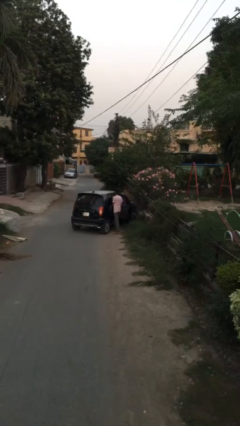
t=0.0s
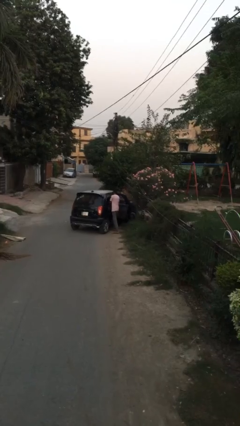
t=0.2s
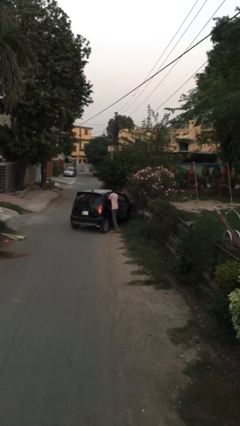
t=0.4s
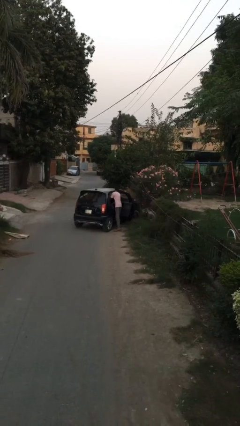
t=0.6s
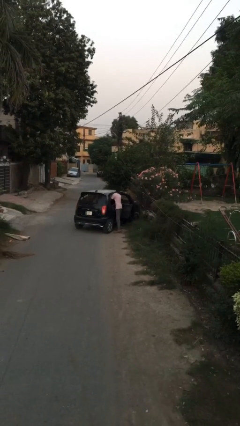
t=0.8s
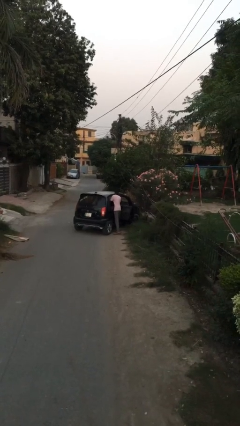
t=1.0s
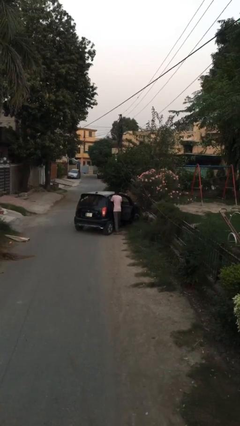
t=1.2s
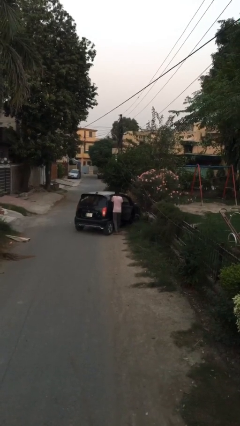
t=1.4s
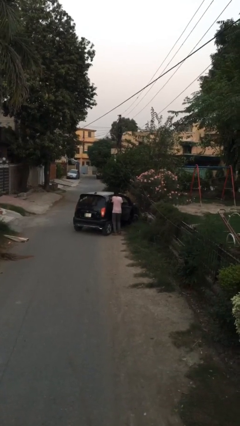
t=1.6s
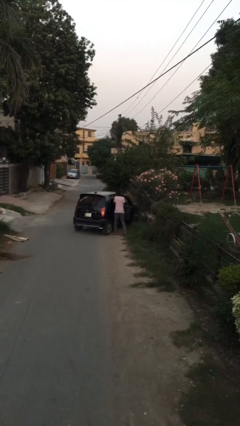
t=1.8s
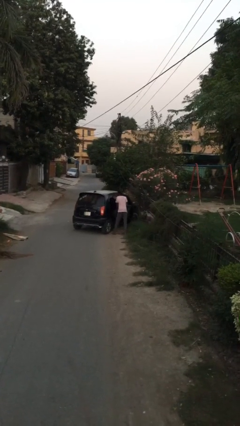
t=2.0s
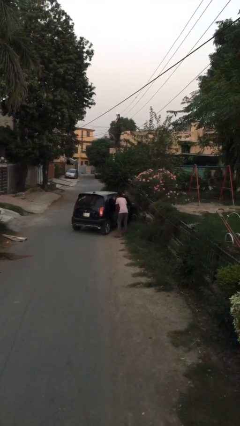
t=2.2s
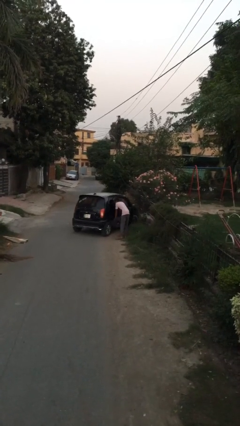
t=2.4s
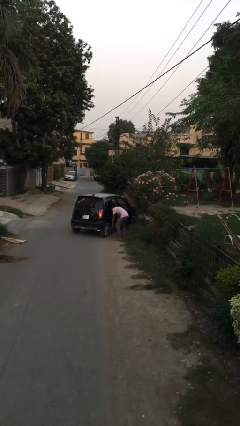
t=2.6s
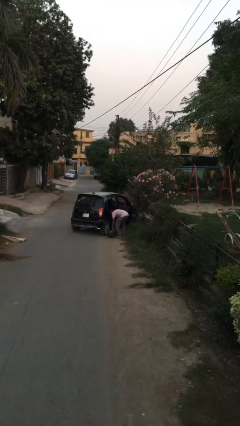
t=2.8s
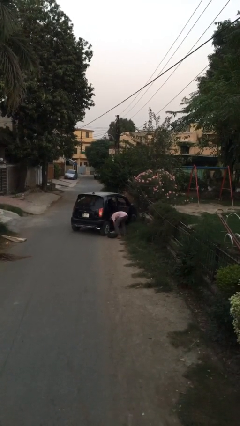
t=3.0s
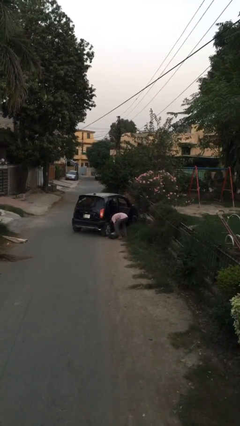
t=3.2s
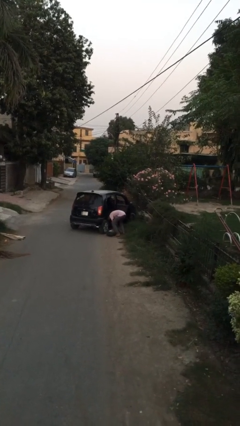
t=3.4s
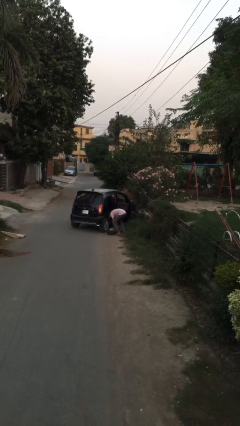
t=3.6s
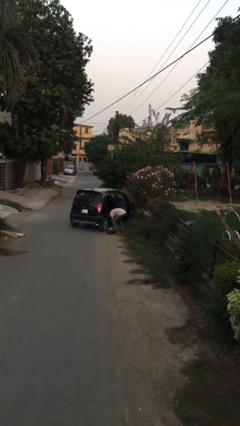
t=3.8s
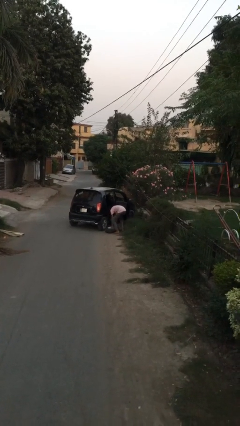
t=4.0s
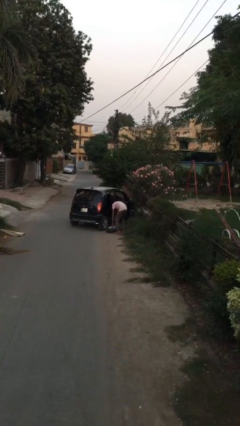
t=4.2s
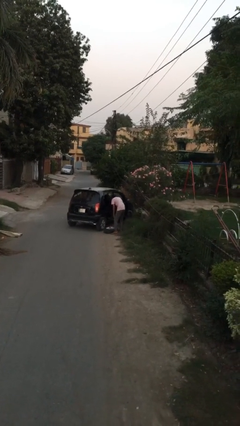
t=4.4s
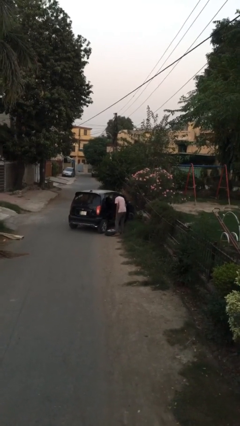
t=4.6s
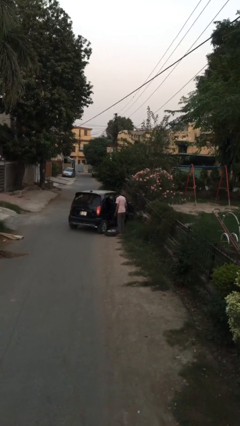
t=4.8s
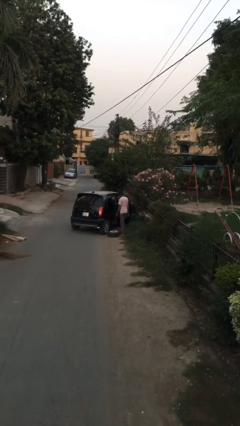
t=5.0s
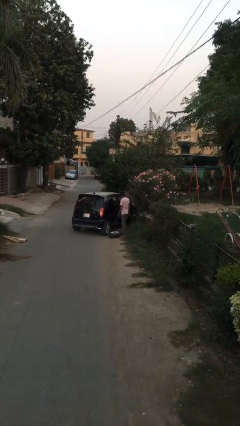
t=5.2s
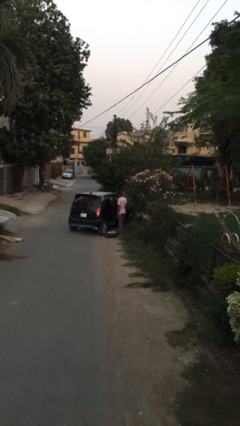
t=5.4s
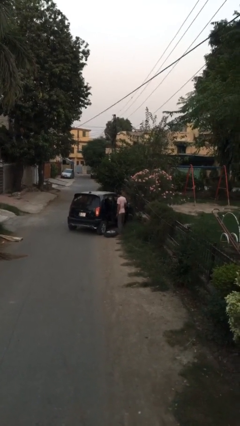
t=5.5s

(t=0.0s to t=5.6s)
person unloads car

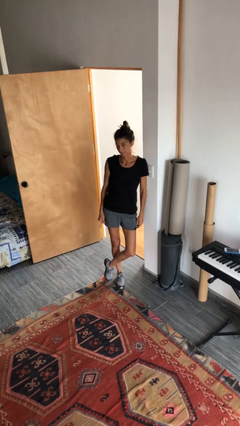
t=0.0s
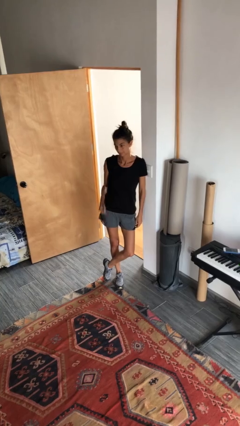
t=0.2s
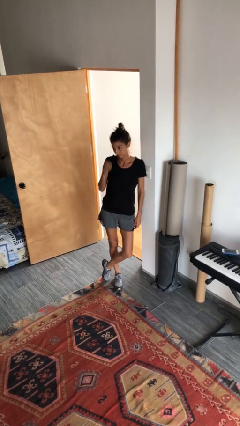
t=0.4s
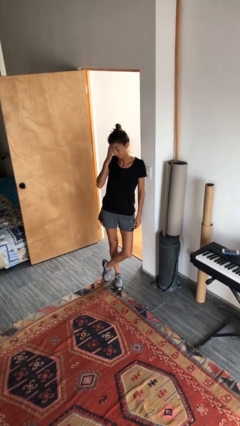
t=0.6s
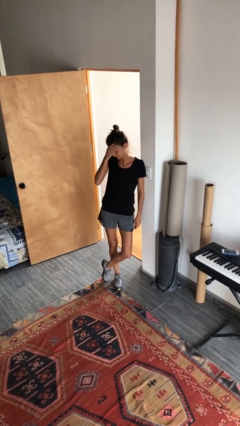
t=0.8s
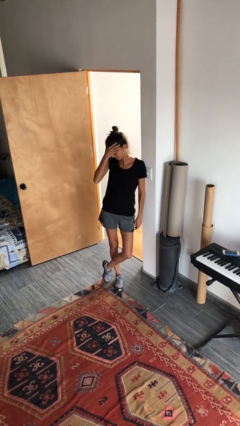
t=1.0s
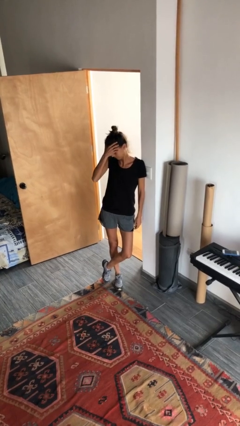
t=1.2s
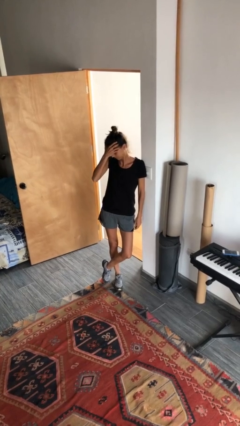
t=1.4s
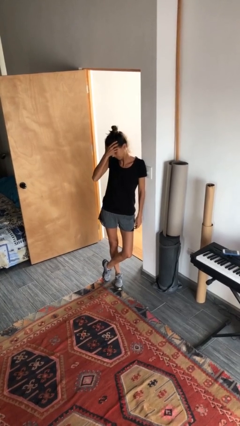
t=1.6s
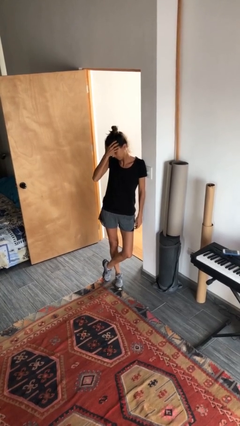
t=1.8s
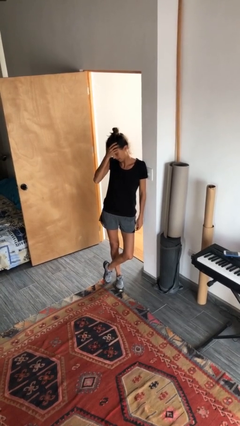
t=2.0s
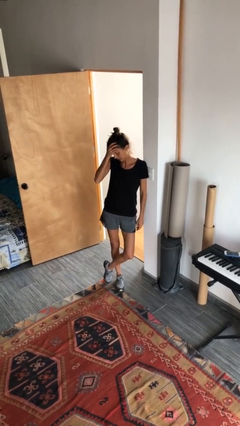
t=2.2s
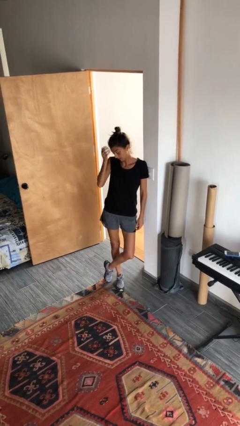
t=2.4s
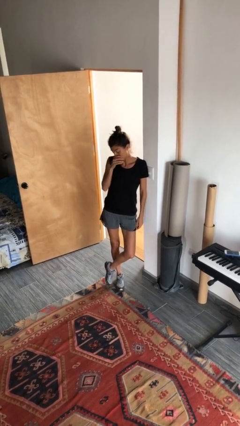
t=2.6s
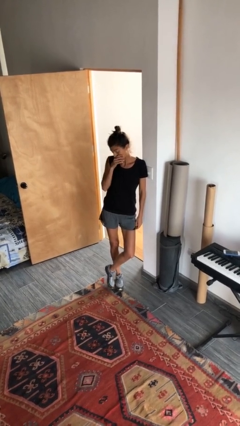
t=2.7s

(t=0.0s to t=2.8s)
person scratches face

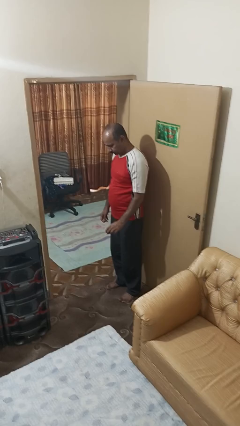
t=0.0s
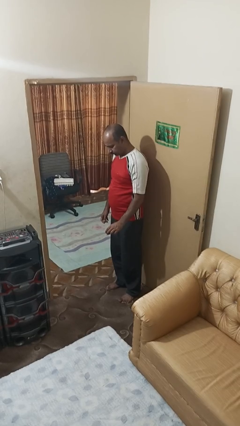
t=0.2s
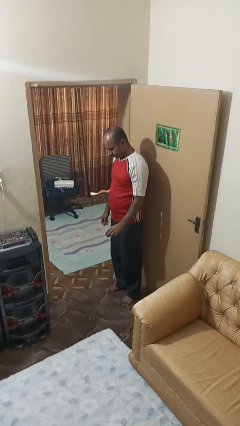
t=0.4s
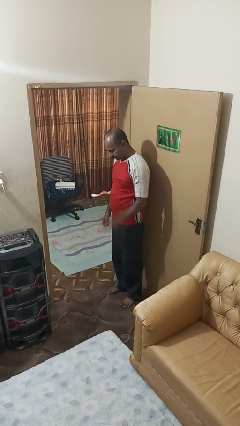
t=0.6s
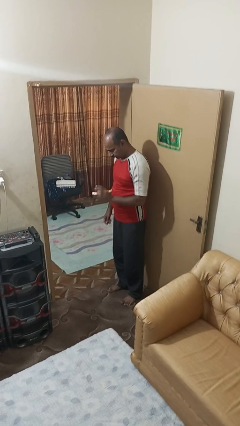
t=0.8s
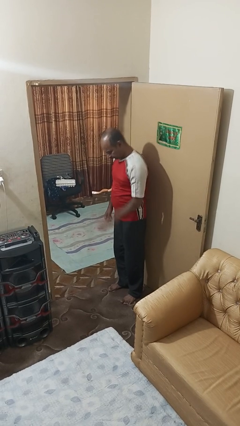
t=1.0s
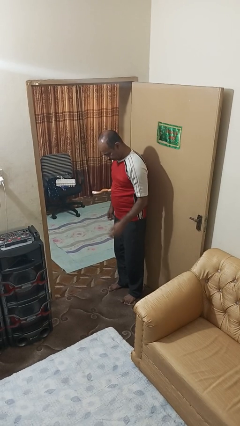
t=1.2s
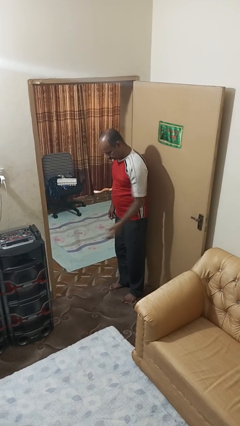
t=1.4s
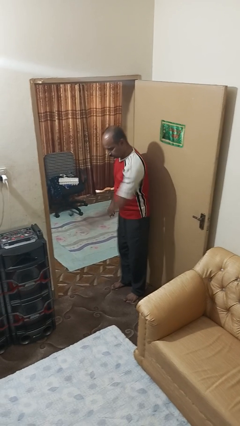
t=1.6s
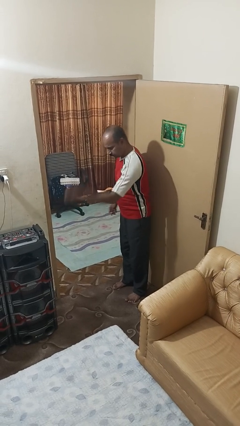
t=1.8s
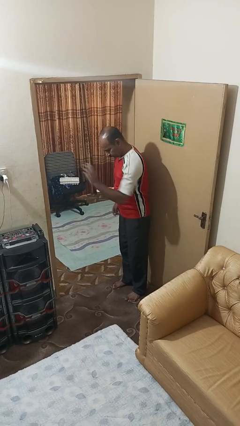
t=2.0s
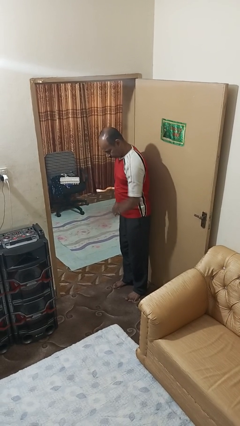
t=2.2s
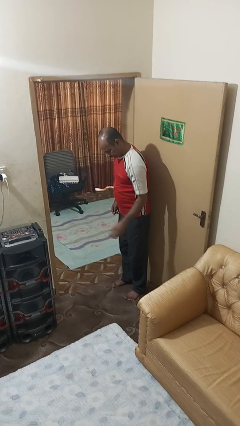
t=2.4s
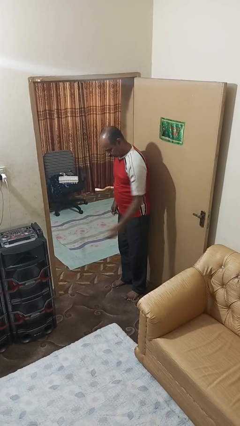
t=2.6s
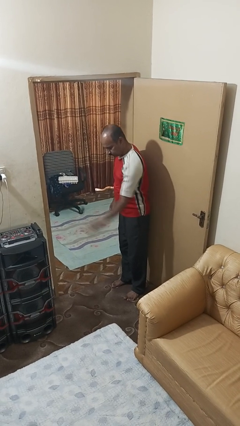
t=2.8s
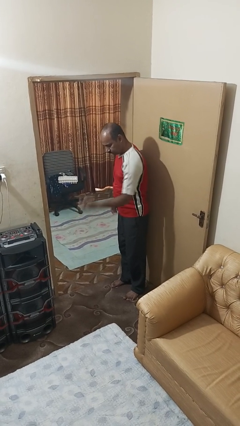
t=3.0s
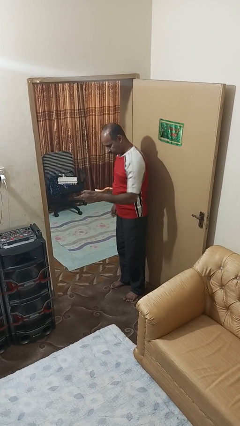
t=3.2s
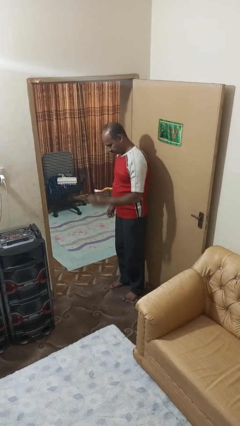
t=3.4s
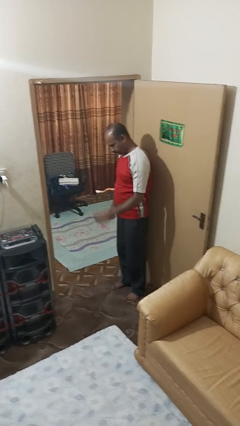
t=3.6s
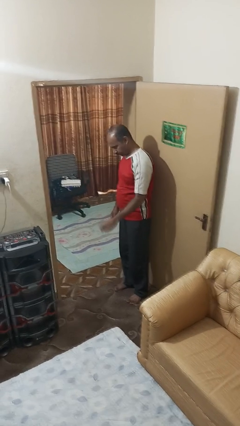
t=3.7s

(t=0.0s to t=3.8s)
person bounces ball on floor

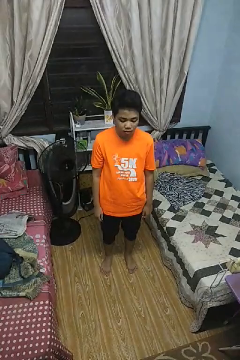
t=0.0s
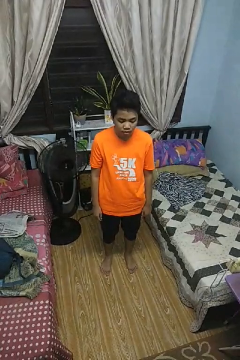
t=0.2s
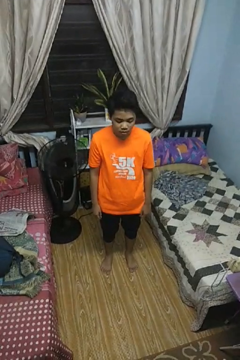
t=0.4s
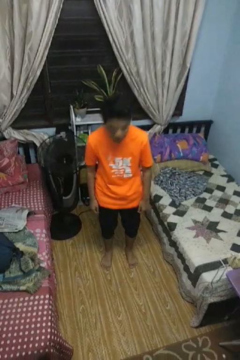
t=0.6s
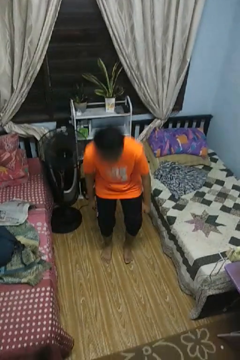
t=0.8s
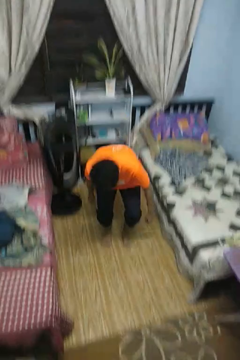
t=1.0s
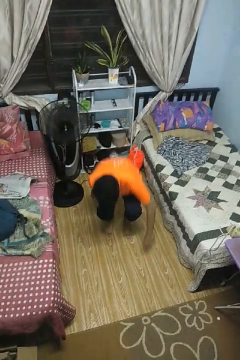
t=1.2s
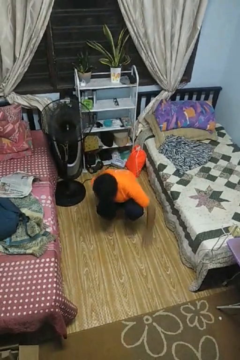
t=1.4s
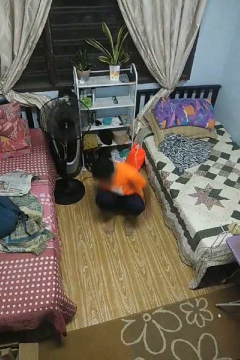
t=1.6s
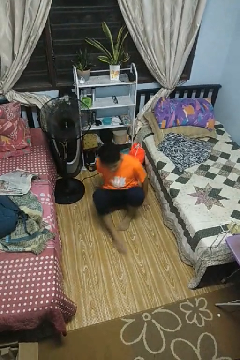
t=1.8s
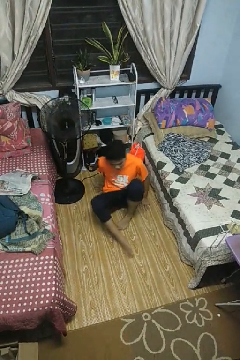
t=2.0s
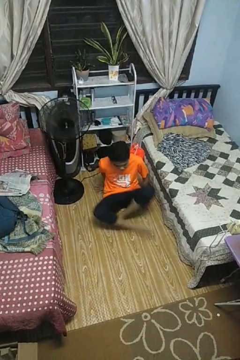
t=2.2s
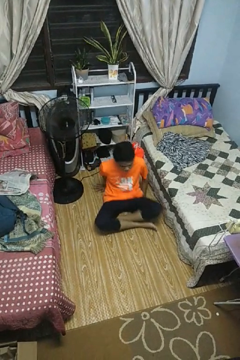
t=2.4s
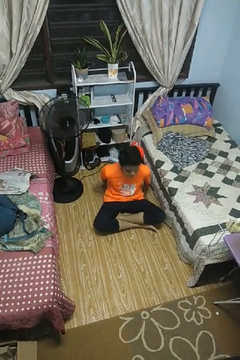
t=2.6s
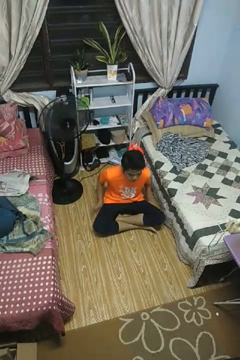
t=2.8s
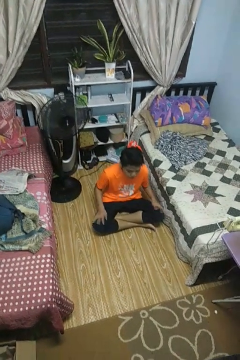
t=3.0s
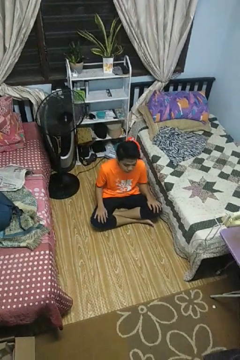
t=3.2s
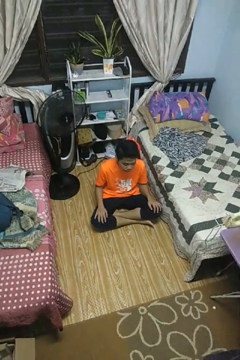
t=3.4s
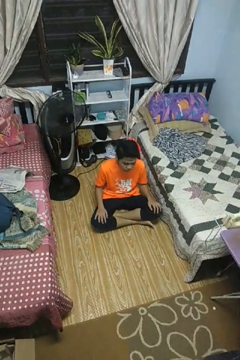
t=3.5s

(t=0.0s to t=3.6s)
person sits crisscross

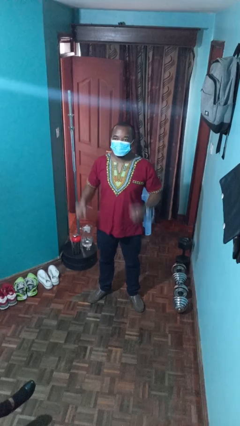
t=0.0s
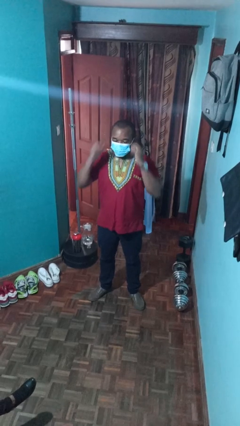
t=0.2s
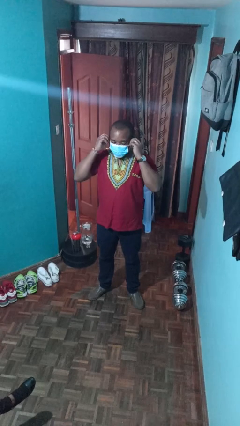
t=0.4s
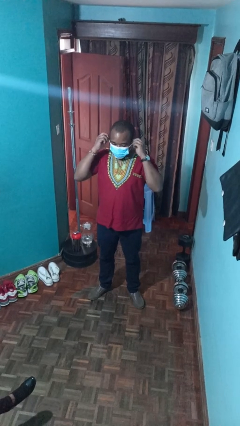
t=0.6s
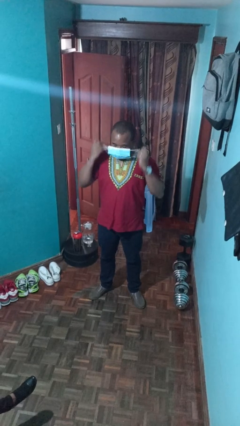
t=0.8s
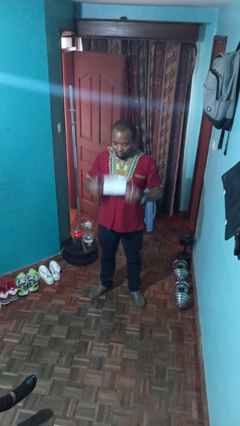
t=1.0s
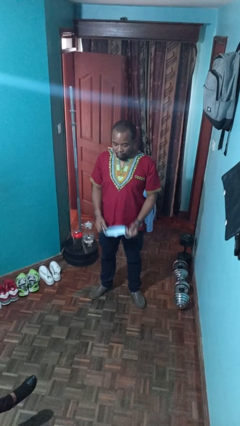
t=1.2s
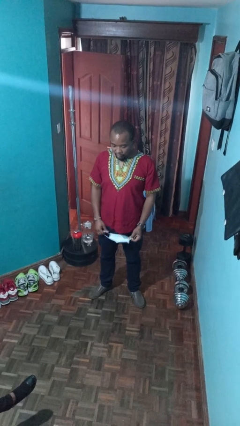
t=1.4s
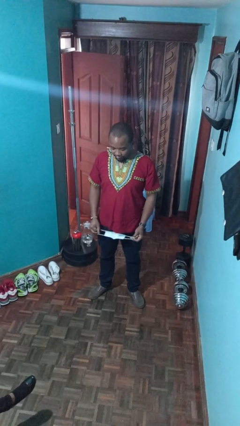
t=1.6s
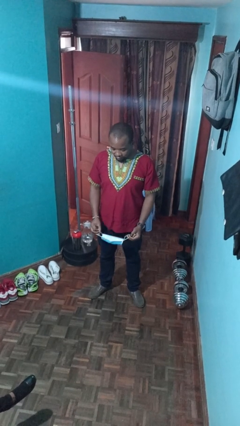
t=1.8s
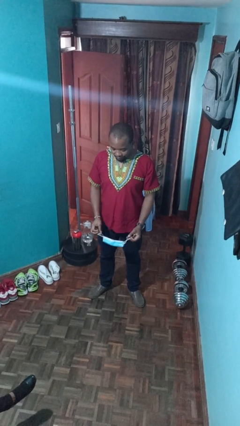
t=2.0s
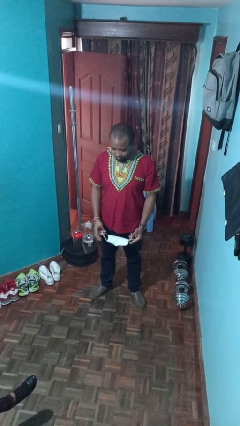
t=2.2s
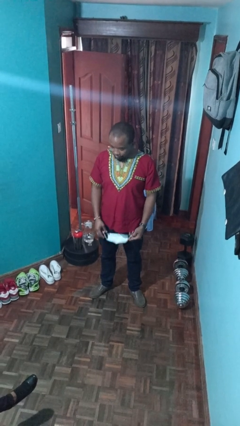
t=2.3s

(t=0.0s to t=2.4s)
person takes off facemask
